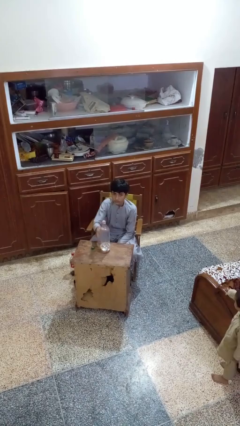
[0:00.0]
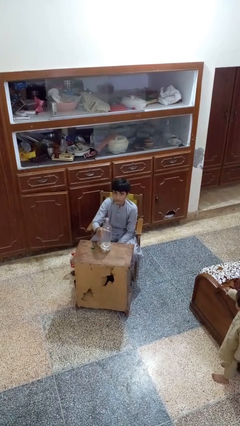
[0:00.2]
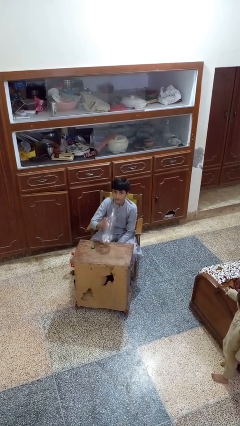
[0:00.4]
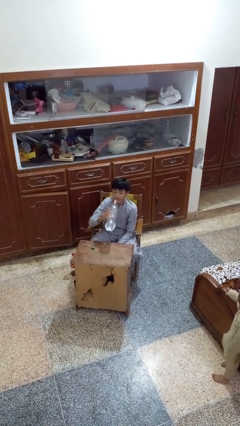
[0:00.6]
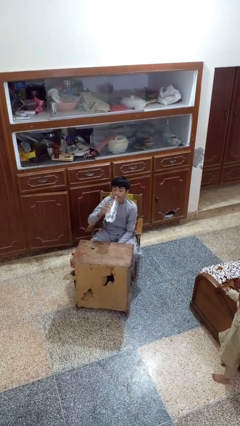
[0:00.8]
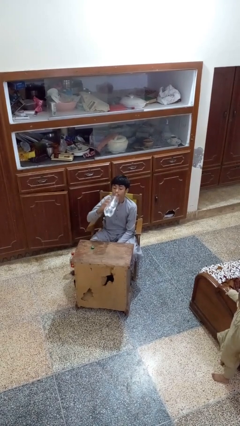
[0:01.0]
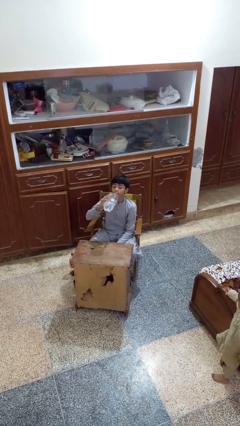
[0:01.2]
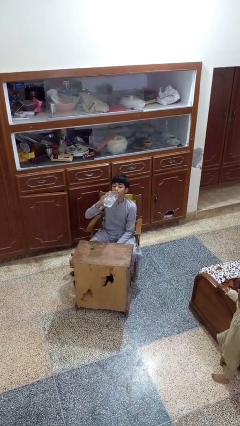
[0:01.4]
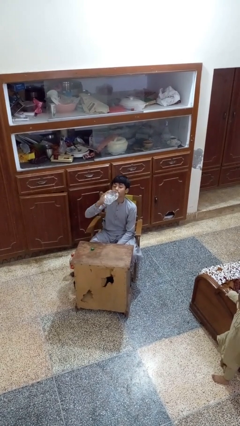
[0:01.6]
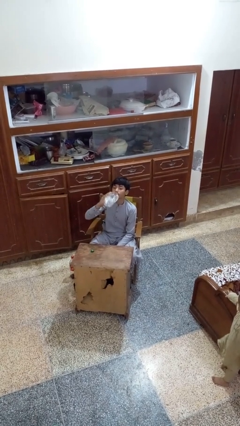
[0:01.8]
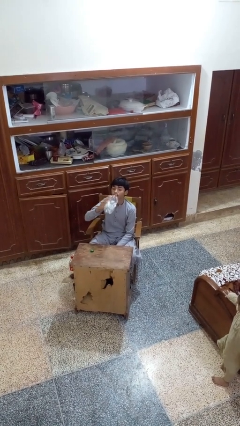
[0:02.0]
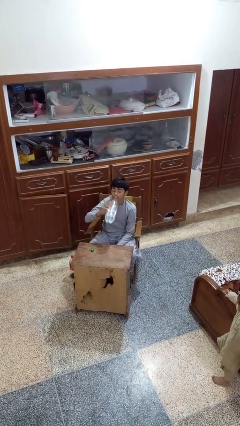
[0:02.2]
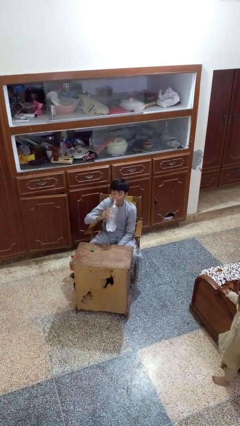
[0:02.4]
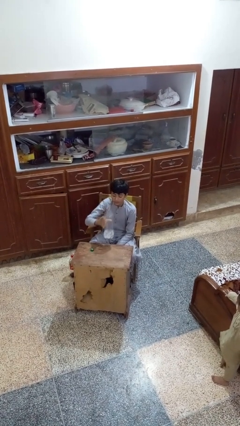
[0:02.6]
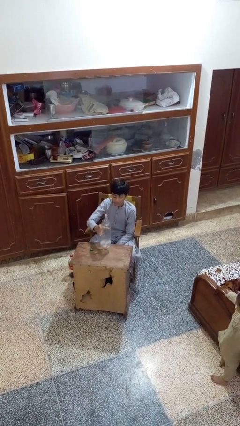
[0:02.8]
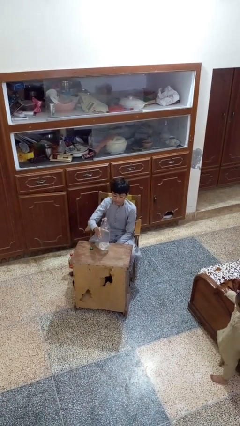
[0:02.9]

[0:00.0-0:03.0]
person drinks from bottle

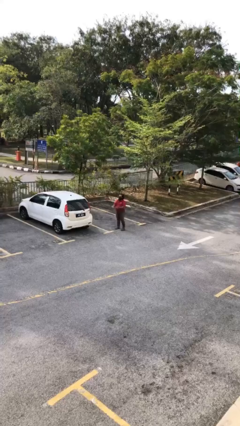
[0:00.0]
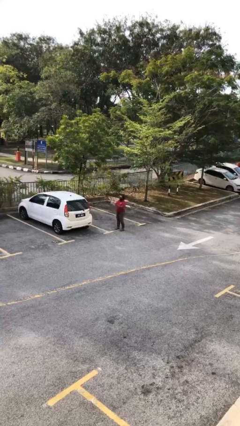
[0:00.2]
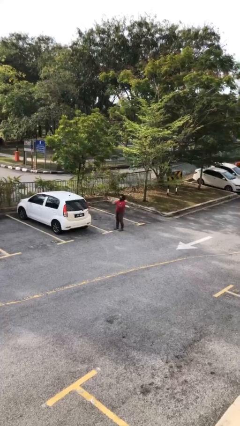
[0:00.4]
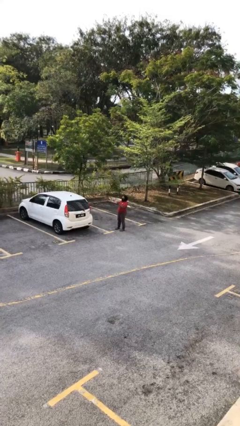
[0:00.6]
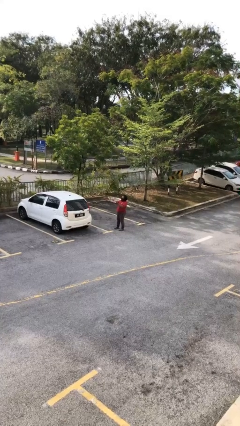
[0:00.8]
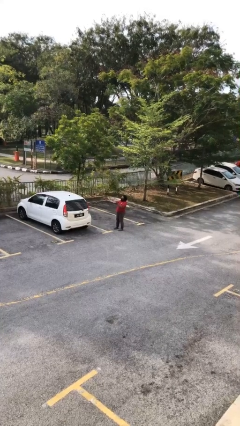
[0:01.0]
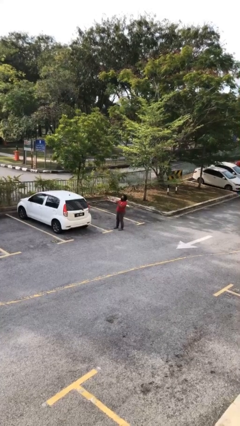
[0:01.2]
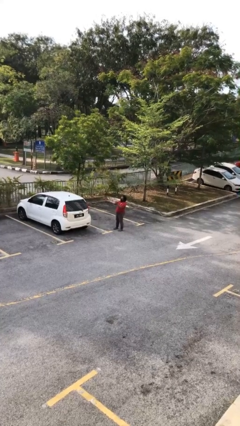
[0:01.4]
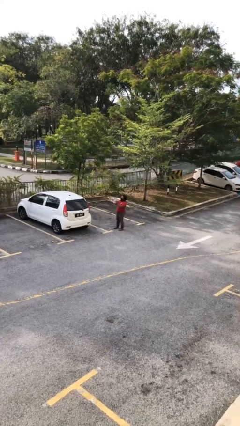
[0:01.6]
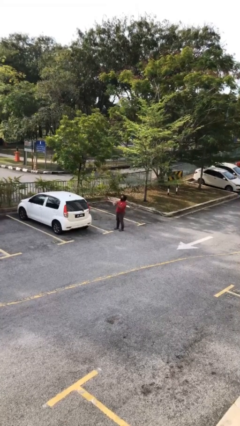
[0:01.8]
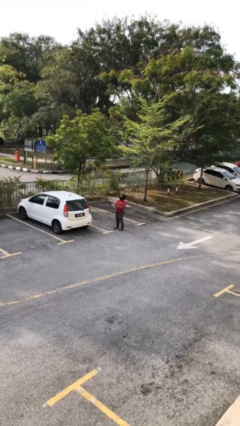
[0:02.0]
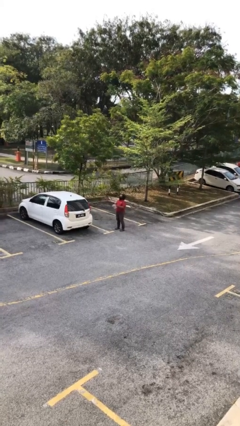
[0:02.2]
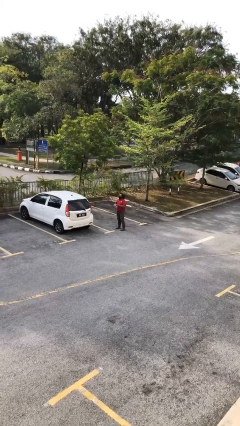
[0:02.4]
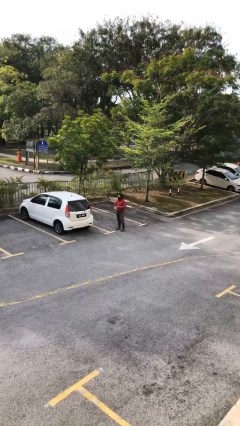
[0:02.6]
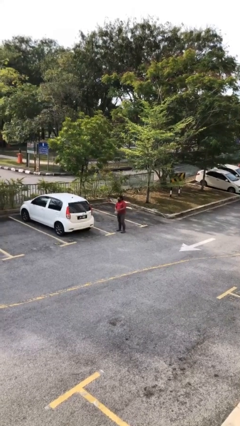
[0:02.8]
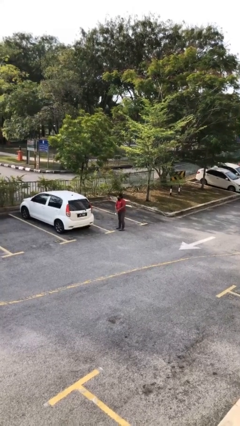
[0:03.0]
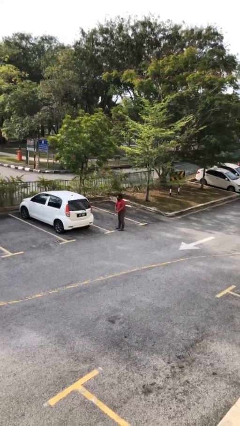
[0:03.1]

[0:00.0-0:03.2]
person reads document

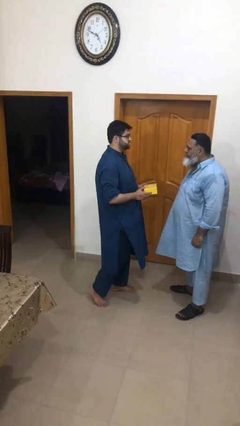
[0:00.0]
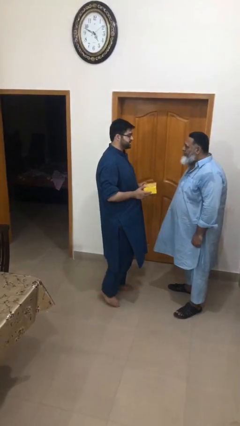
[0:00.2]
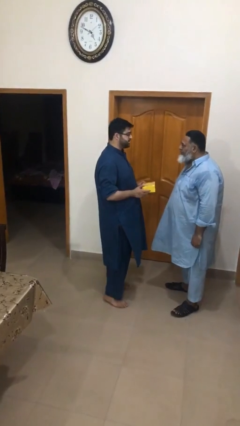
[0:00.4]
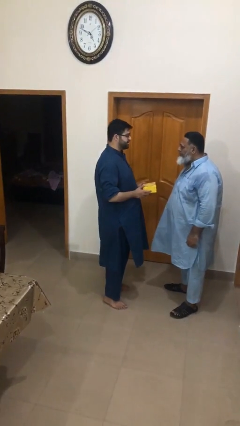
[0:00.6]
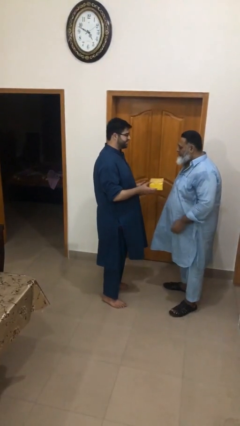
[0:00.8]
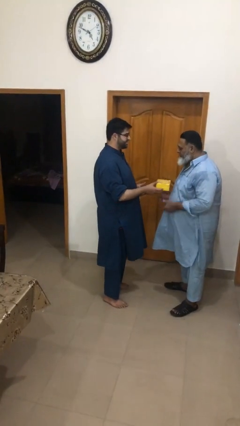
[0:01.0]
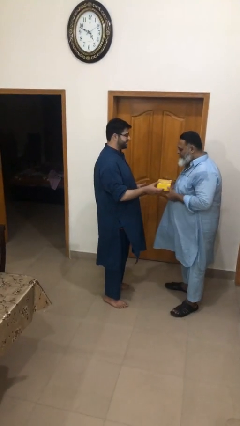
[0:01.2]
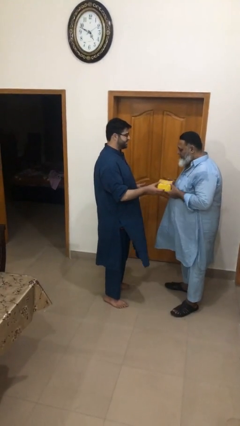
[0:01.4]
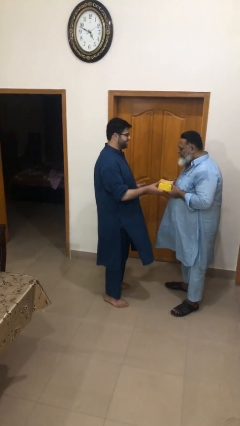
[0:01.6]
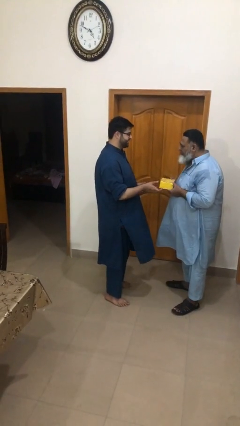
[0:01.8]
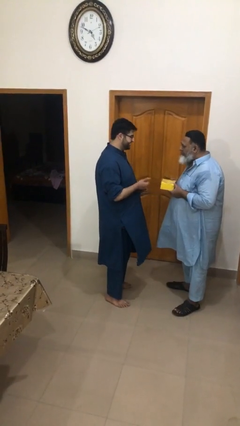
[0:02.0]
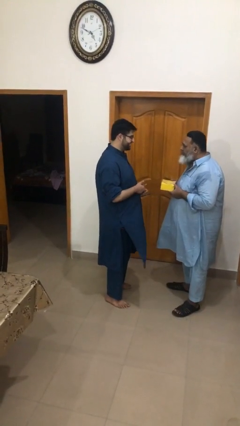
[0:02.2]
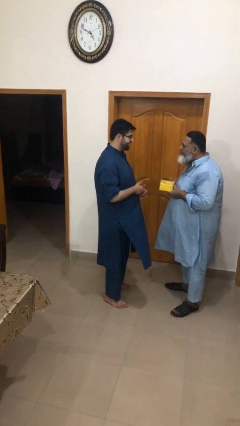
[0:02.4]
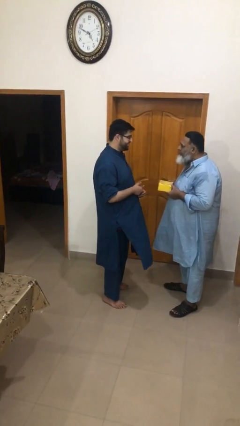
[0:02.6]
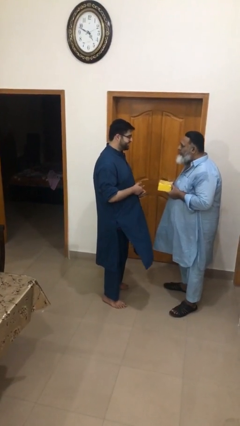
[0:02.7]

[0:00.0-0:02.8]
person transfers object to person

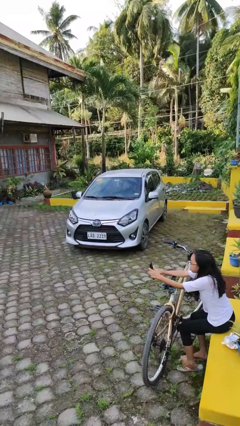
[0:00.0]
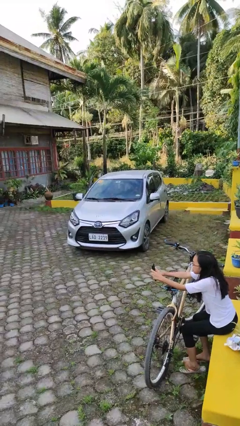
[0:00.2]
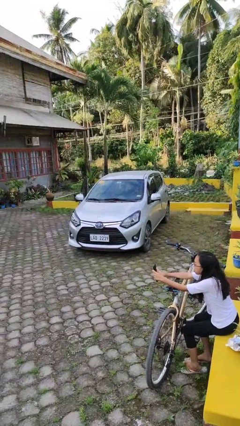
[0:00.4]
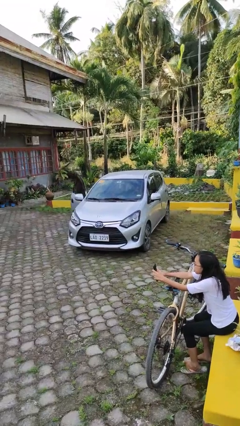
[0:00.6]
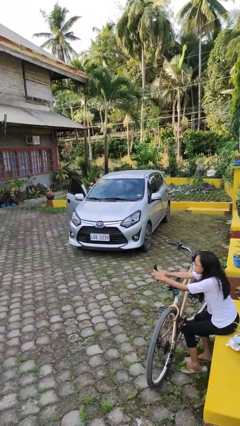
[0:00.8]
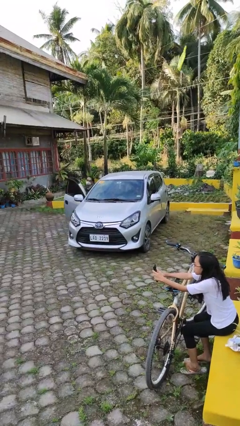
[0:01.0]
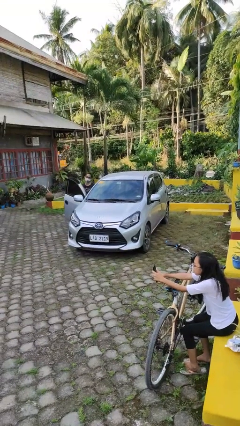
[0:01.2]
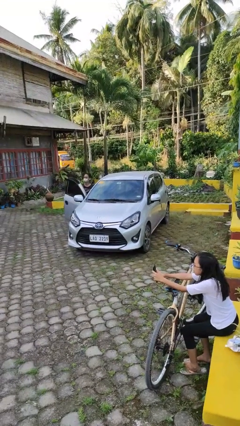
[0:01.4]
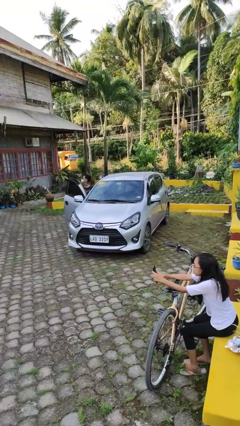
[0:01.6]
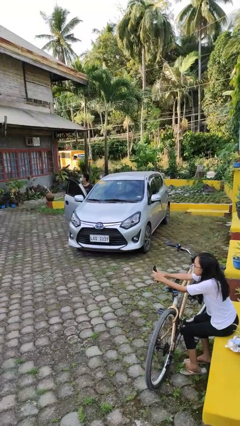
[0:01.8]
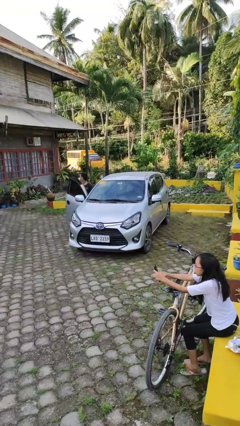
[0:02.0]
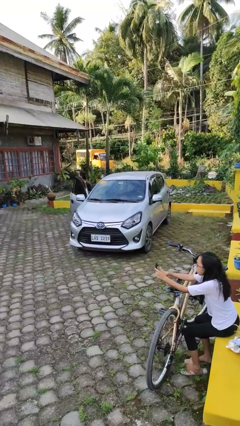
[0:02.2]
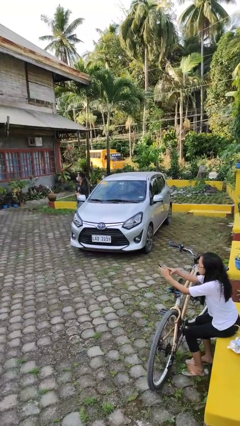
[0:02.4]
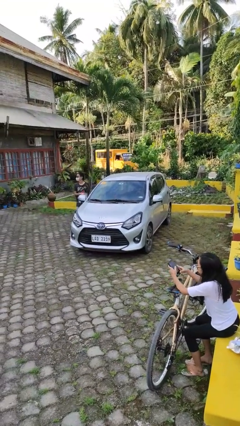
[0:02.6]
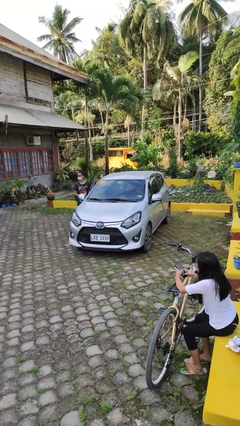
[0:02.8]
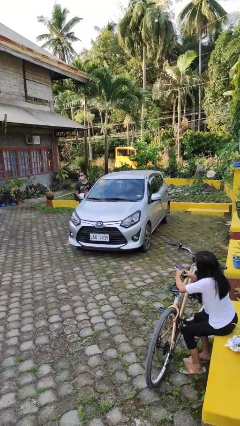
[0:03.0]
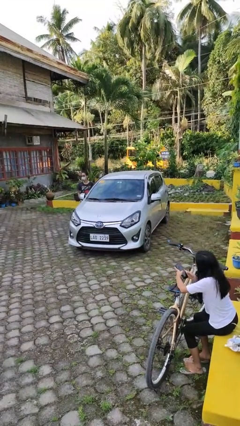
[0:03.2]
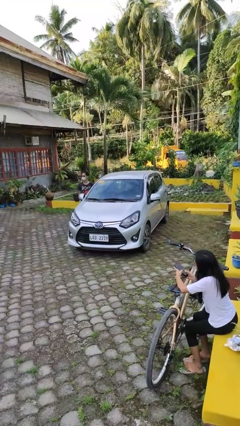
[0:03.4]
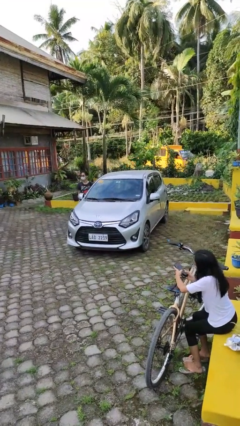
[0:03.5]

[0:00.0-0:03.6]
car drops off person

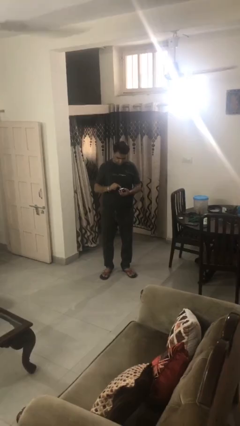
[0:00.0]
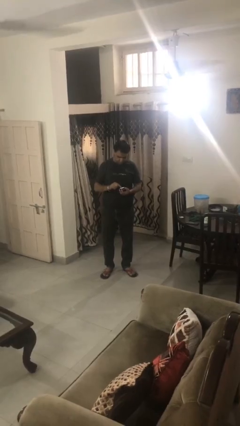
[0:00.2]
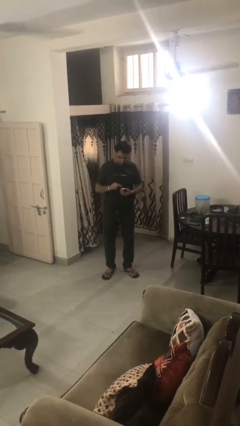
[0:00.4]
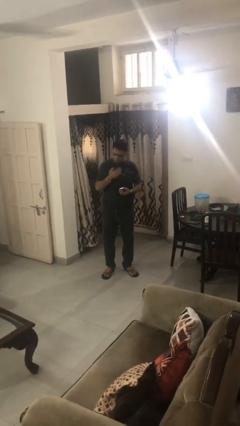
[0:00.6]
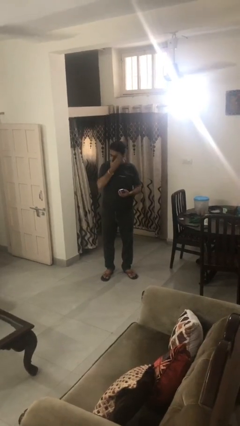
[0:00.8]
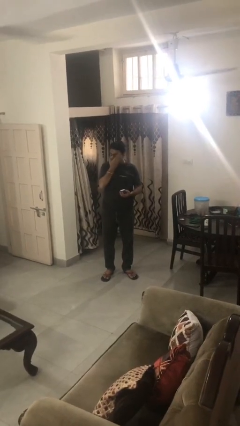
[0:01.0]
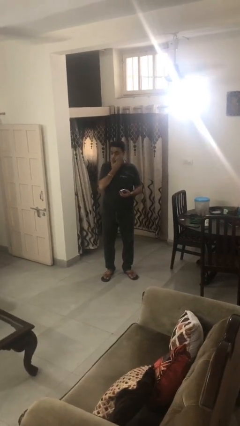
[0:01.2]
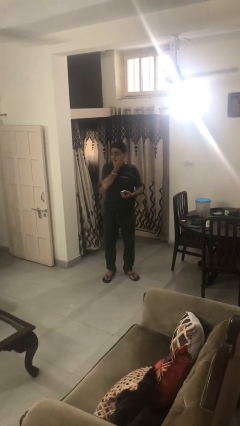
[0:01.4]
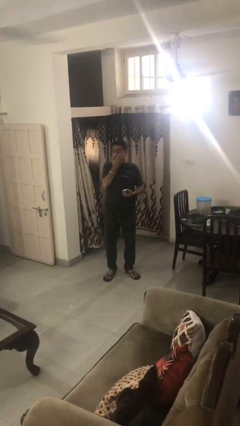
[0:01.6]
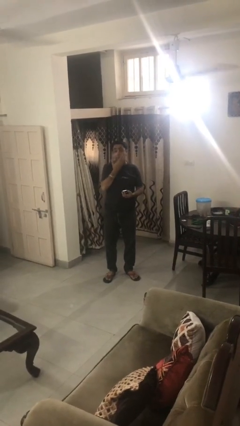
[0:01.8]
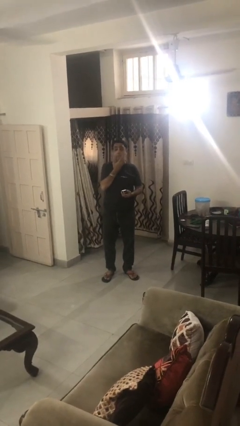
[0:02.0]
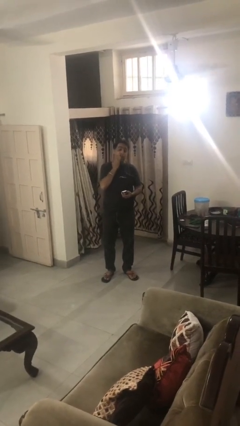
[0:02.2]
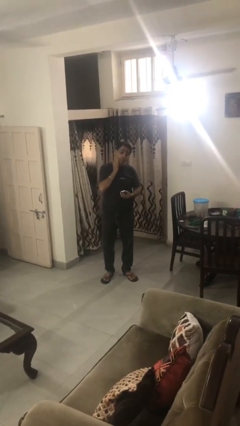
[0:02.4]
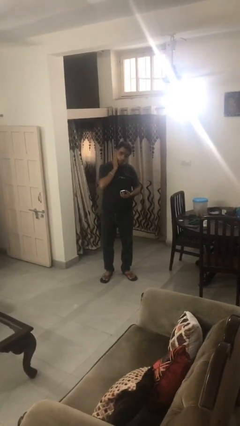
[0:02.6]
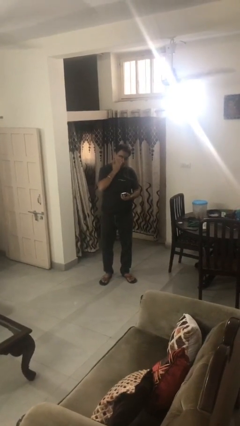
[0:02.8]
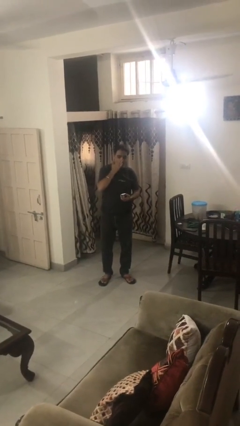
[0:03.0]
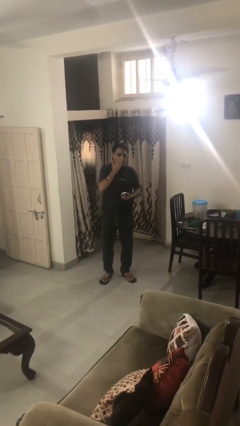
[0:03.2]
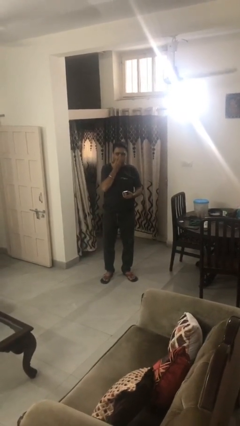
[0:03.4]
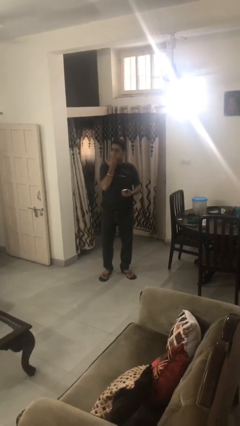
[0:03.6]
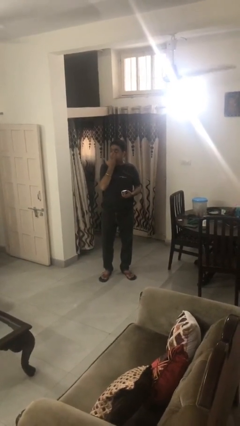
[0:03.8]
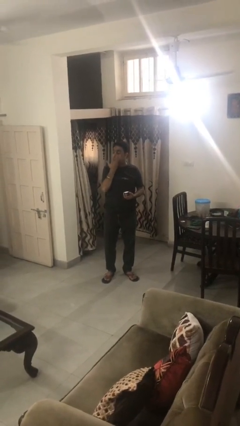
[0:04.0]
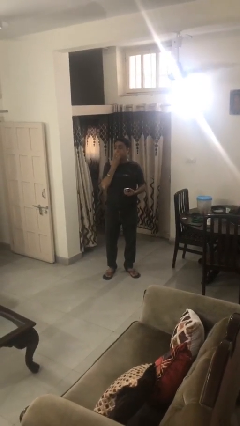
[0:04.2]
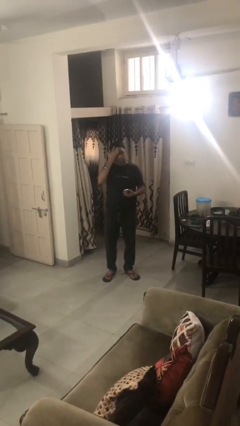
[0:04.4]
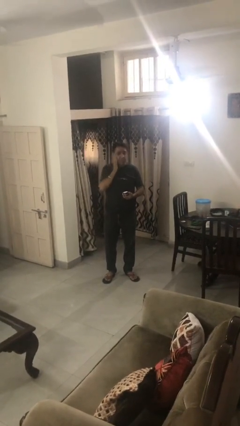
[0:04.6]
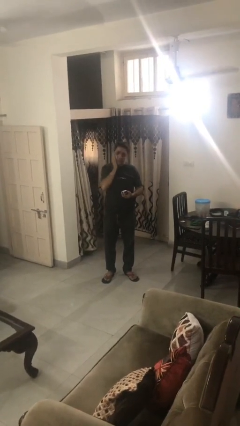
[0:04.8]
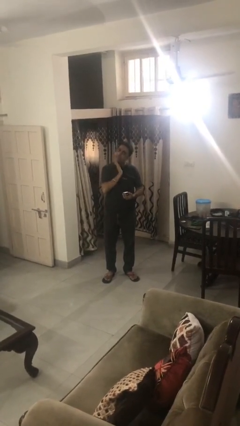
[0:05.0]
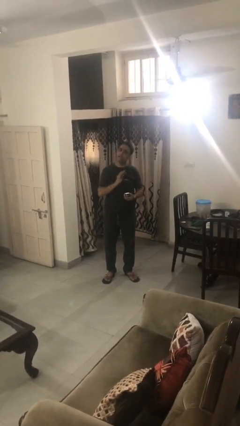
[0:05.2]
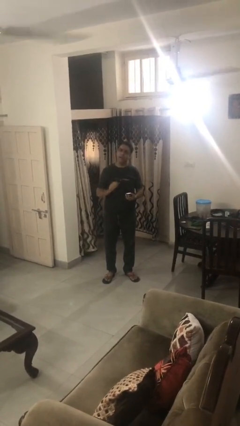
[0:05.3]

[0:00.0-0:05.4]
person applies facial moisturizer
